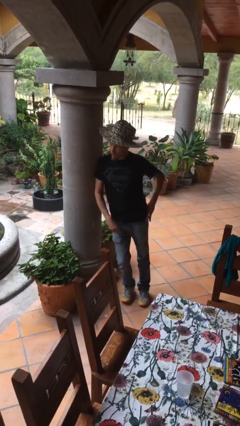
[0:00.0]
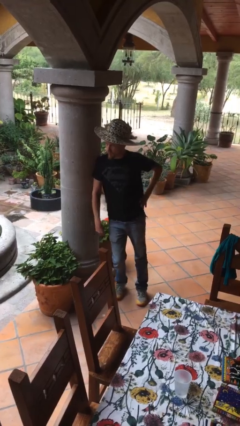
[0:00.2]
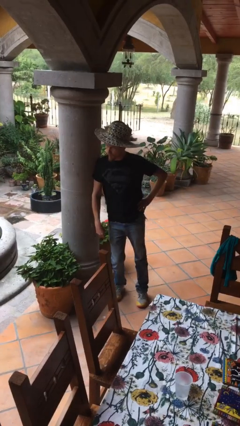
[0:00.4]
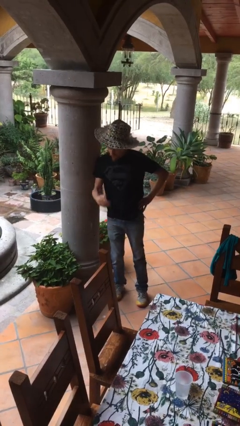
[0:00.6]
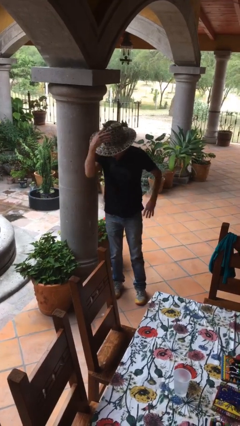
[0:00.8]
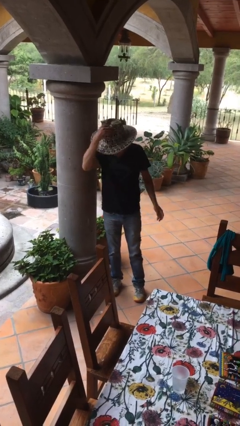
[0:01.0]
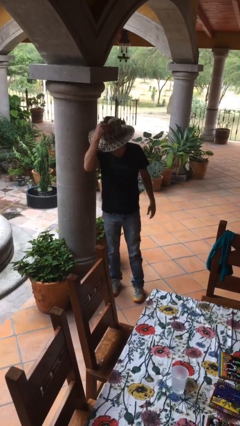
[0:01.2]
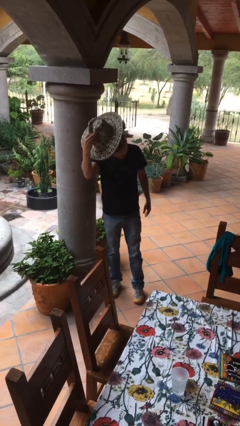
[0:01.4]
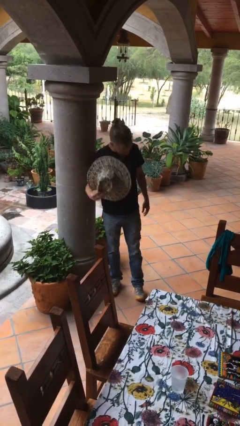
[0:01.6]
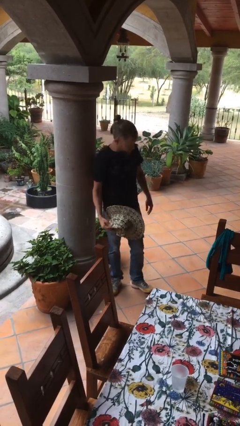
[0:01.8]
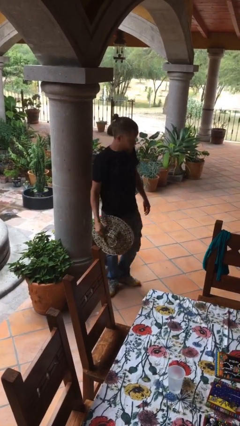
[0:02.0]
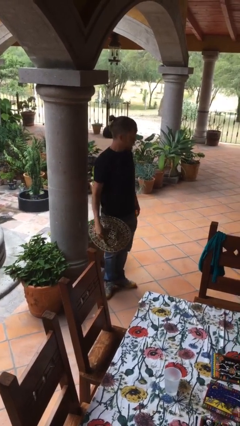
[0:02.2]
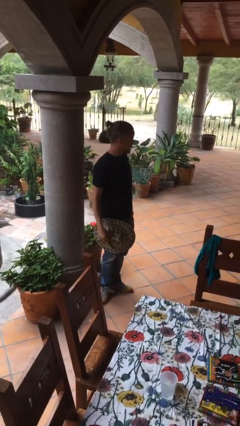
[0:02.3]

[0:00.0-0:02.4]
person takes off hat

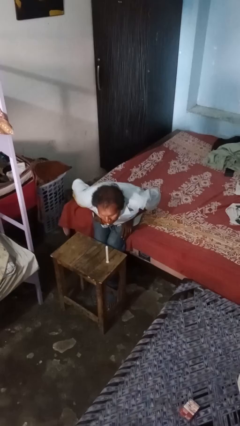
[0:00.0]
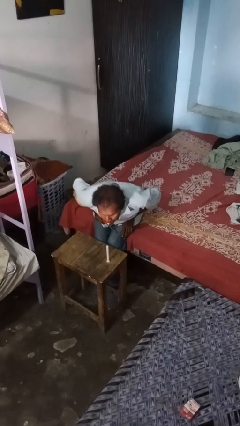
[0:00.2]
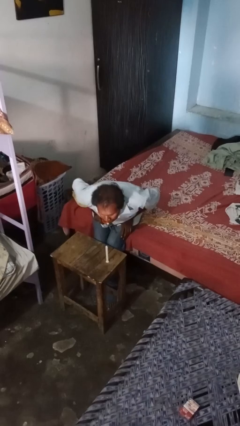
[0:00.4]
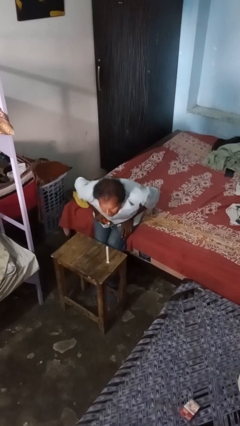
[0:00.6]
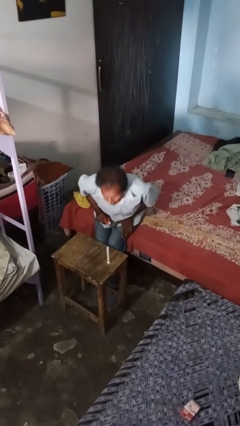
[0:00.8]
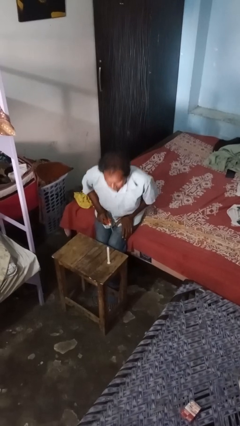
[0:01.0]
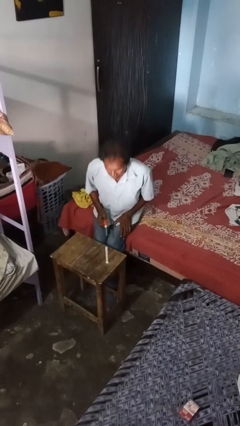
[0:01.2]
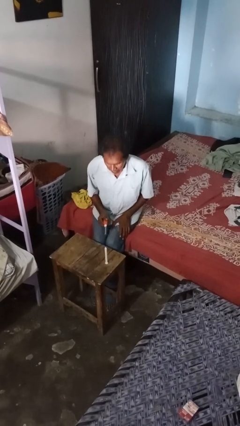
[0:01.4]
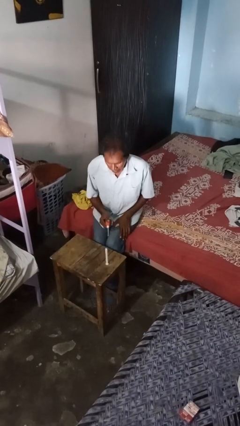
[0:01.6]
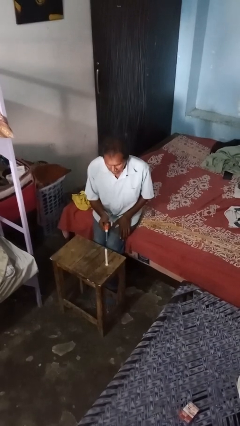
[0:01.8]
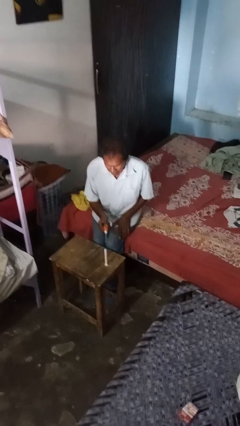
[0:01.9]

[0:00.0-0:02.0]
person extinguishes candle

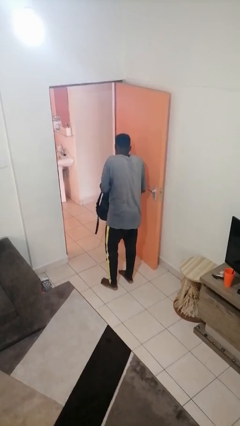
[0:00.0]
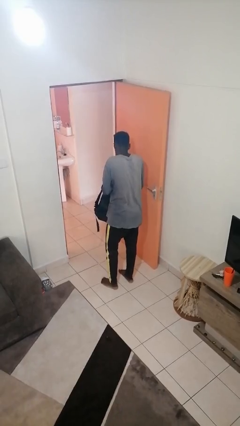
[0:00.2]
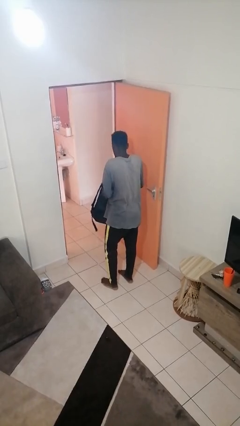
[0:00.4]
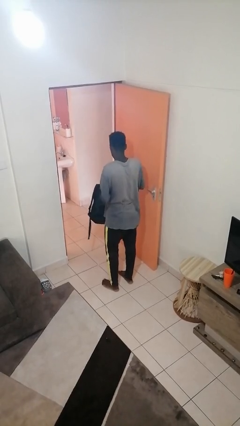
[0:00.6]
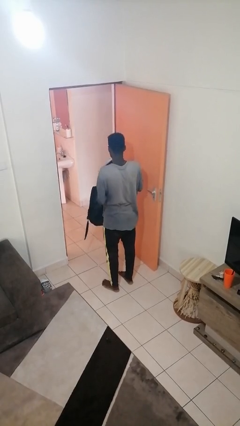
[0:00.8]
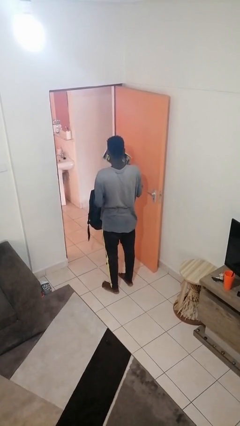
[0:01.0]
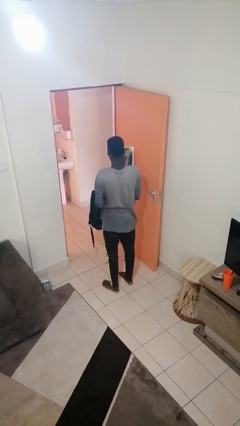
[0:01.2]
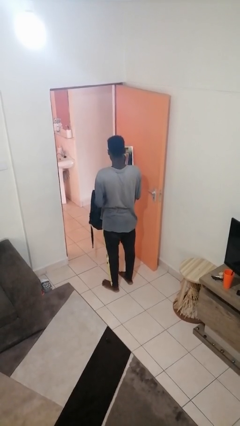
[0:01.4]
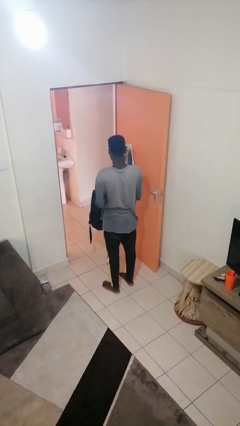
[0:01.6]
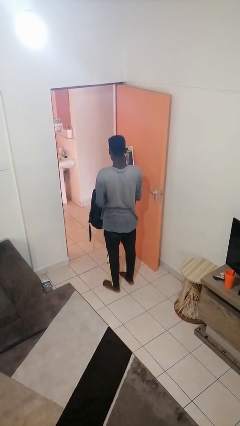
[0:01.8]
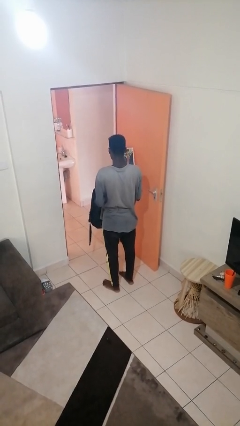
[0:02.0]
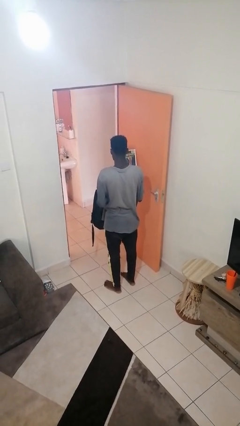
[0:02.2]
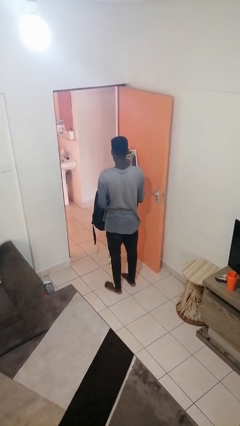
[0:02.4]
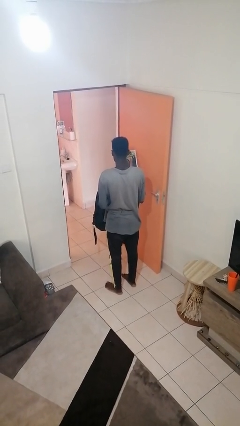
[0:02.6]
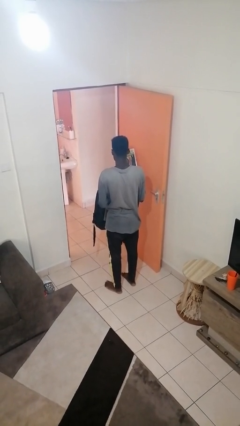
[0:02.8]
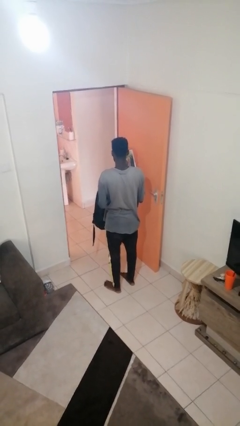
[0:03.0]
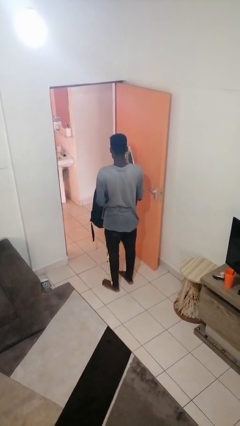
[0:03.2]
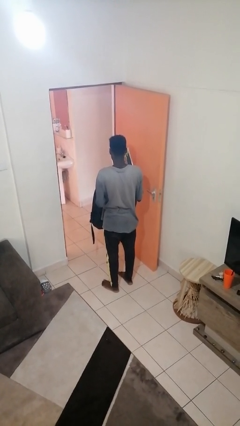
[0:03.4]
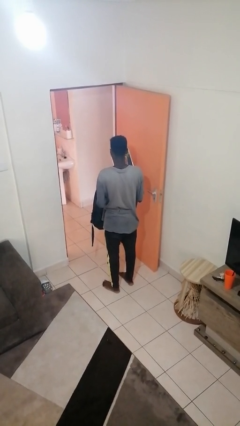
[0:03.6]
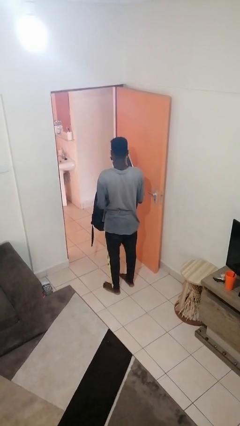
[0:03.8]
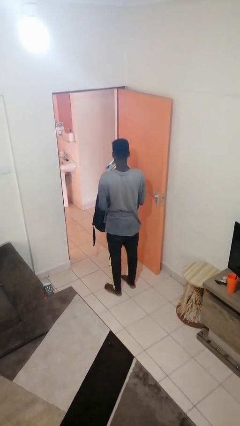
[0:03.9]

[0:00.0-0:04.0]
person takes object from backpack

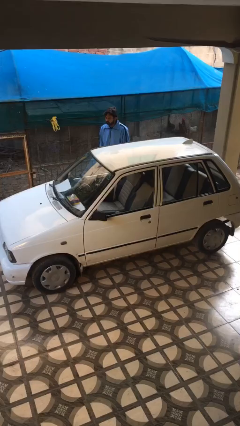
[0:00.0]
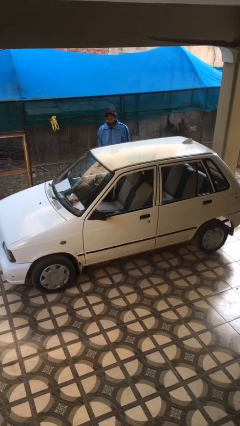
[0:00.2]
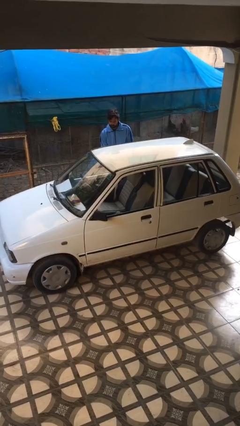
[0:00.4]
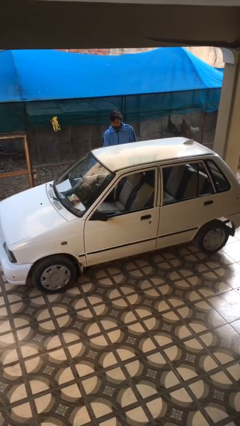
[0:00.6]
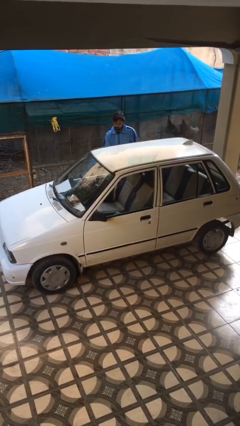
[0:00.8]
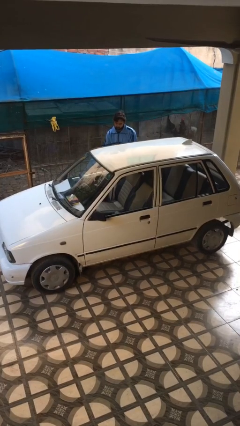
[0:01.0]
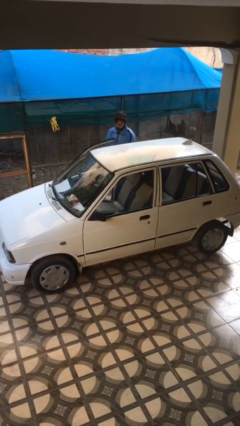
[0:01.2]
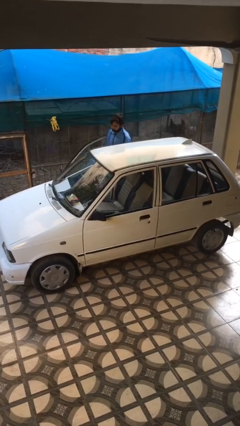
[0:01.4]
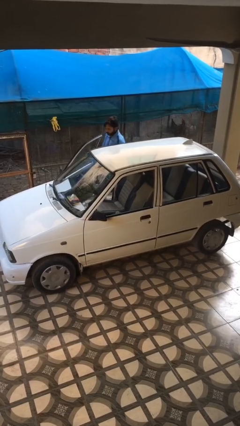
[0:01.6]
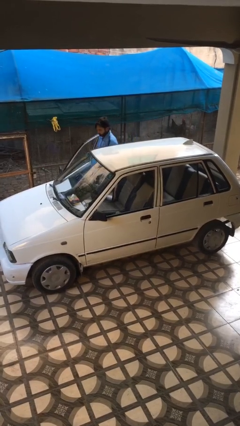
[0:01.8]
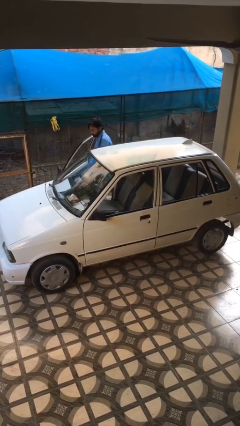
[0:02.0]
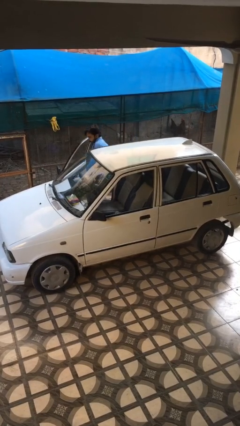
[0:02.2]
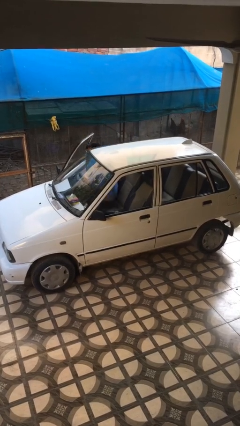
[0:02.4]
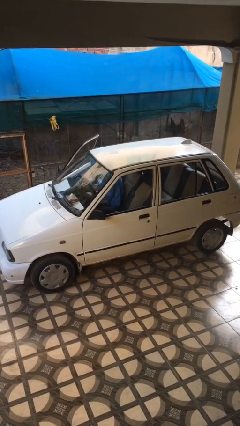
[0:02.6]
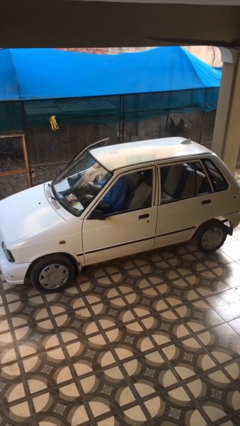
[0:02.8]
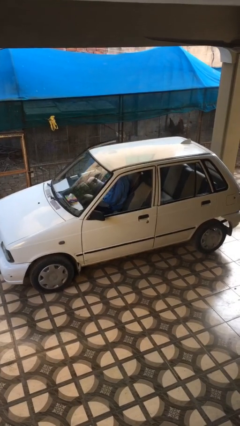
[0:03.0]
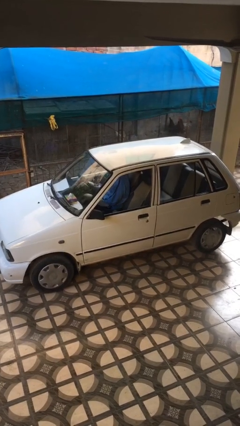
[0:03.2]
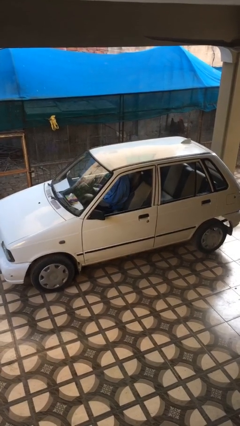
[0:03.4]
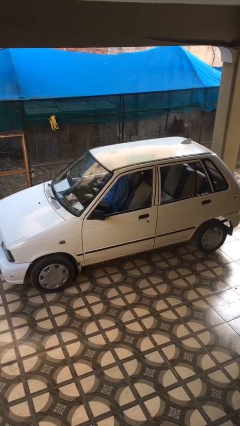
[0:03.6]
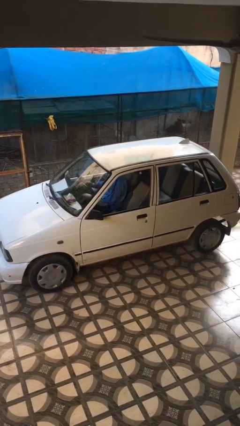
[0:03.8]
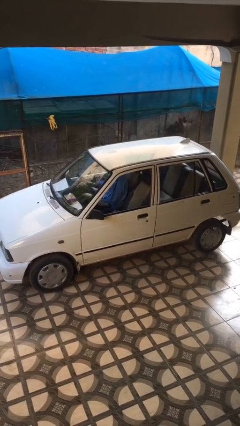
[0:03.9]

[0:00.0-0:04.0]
car picks up person

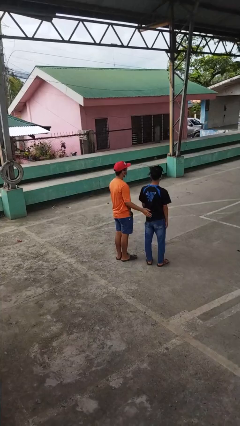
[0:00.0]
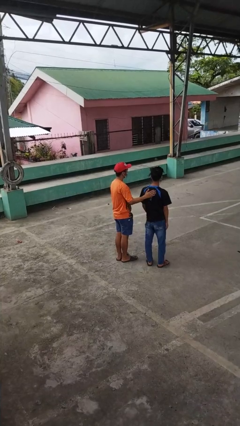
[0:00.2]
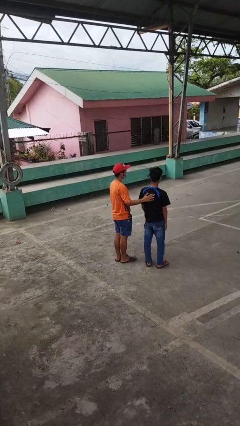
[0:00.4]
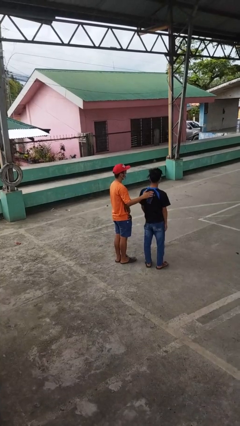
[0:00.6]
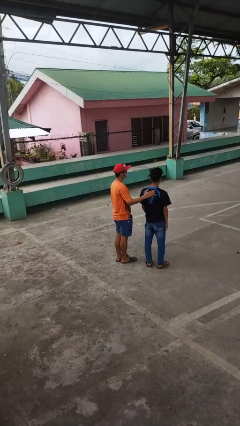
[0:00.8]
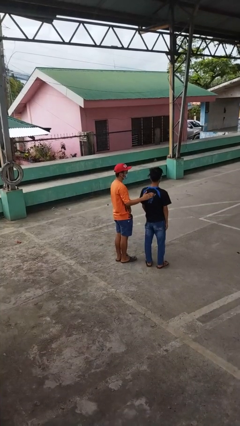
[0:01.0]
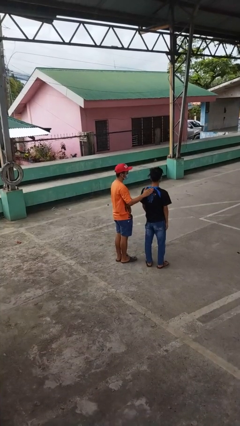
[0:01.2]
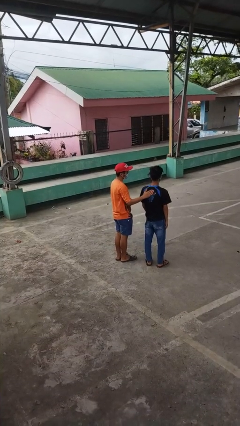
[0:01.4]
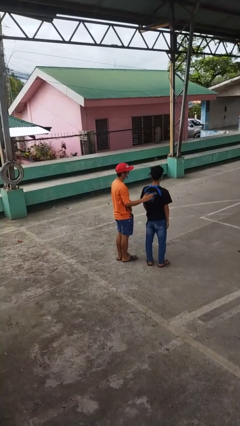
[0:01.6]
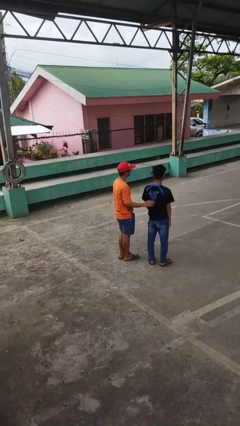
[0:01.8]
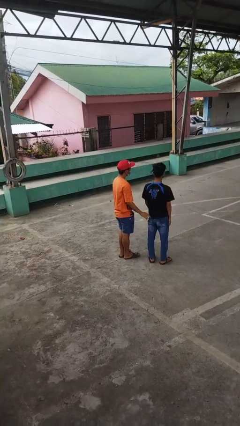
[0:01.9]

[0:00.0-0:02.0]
person touches back of person

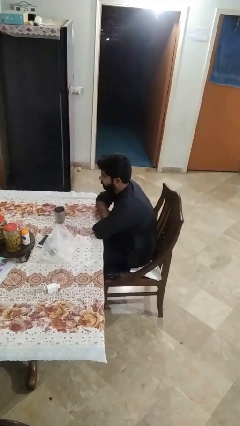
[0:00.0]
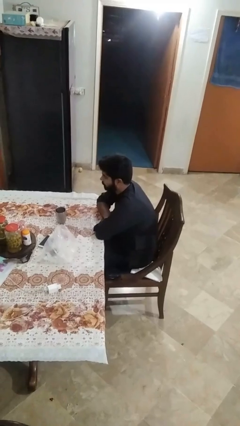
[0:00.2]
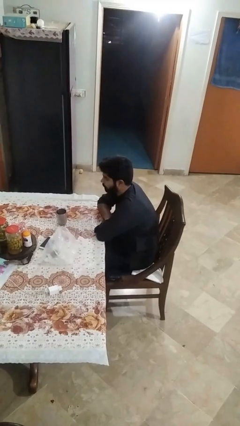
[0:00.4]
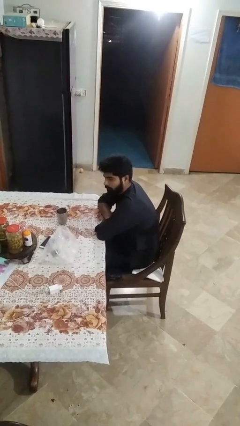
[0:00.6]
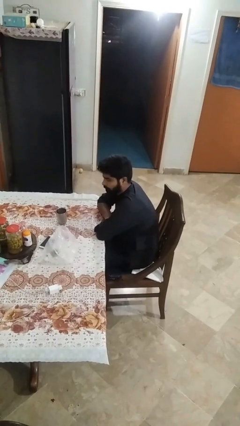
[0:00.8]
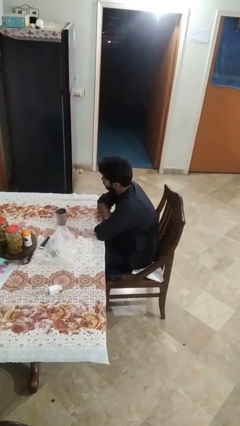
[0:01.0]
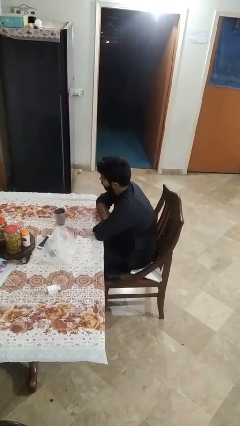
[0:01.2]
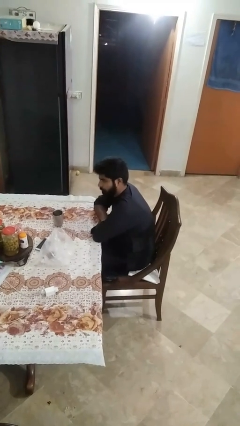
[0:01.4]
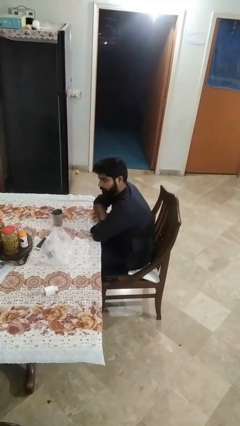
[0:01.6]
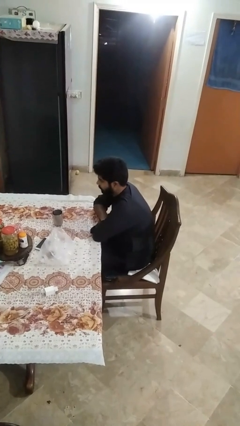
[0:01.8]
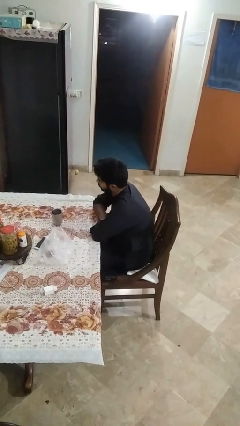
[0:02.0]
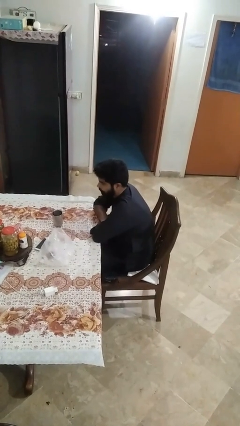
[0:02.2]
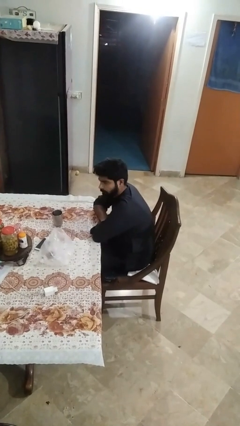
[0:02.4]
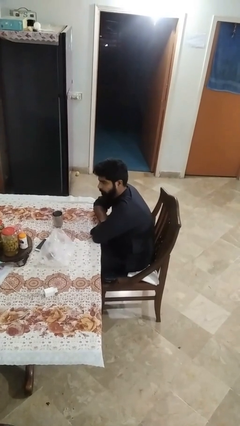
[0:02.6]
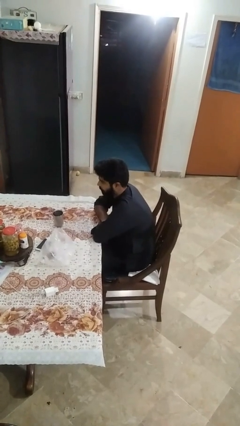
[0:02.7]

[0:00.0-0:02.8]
person shakes head

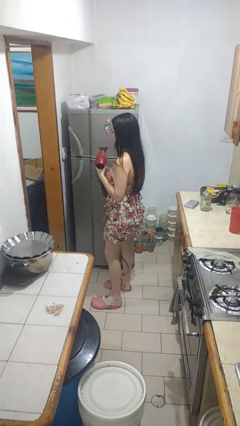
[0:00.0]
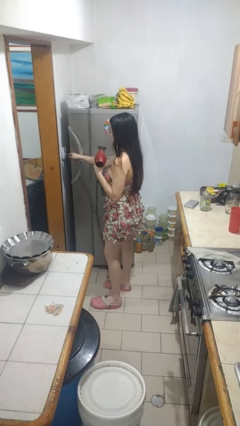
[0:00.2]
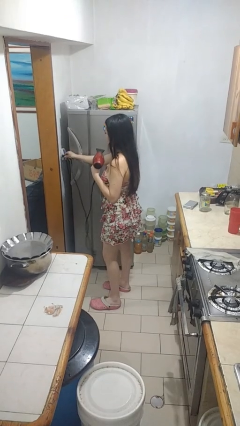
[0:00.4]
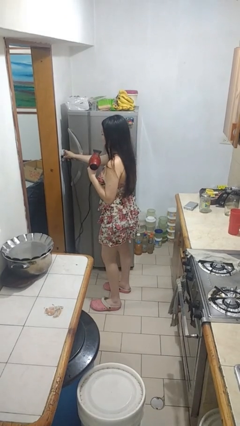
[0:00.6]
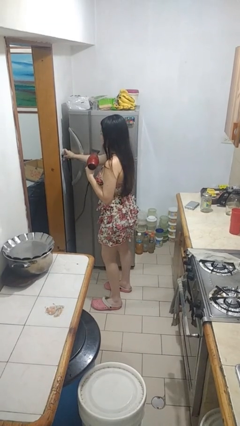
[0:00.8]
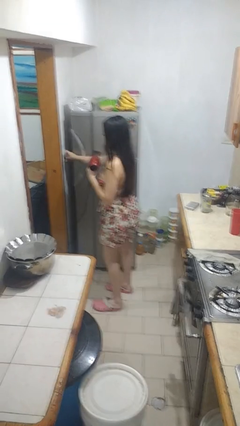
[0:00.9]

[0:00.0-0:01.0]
person plugs into electrical socket
